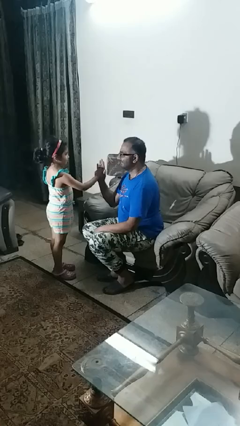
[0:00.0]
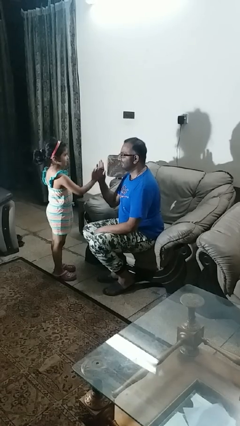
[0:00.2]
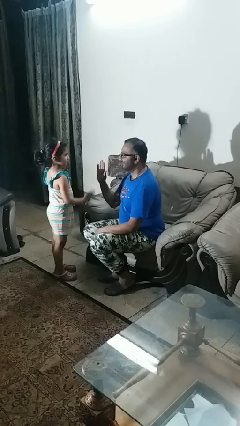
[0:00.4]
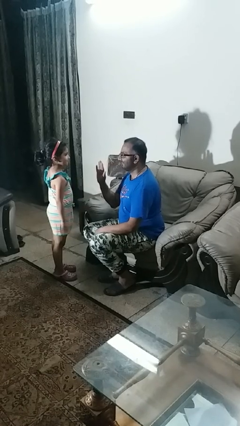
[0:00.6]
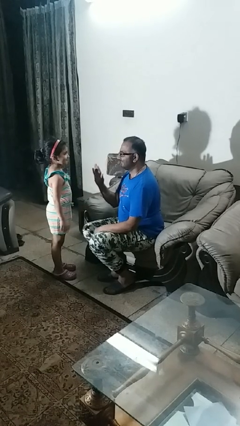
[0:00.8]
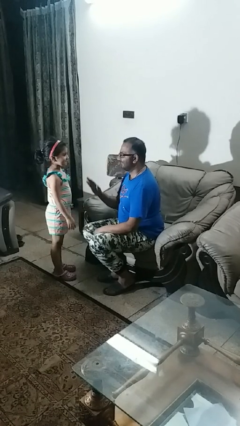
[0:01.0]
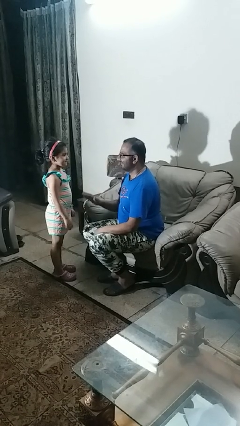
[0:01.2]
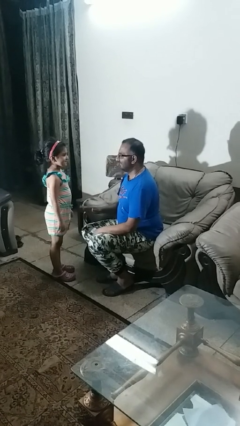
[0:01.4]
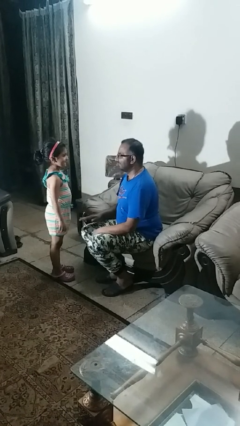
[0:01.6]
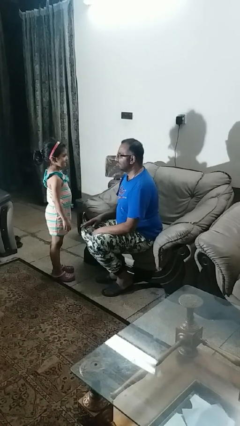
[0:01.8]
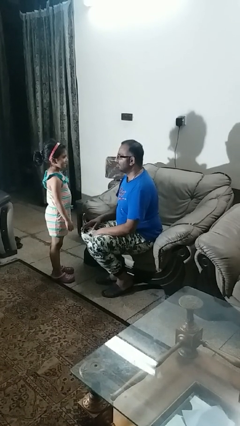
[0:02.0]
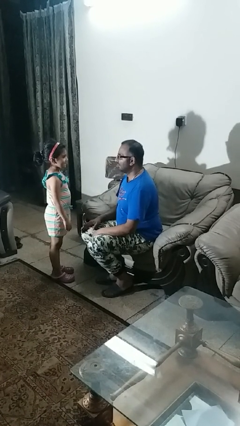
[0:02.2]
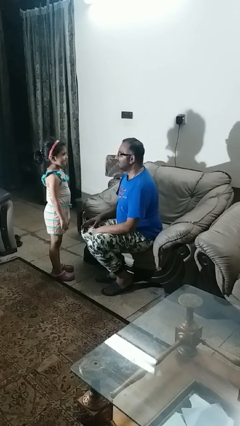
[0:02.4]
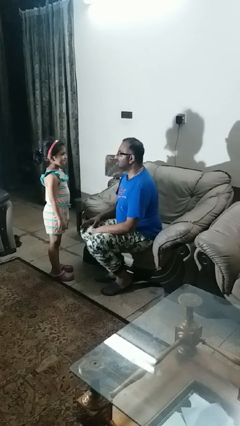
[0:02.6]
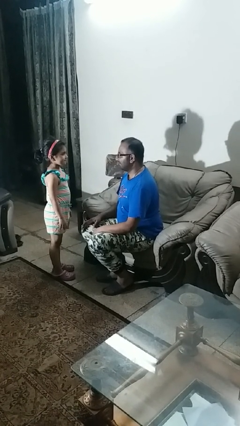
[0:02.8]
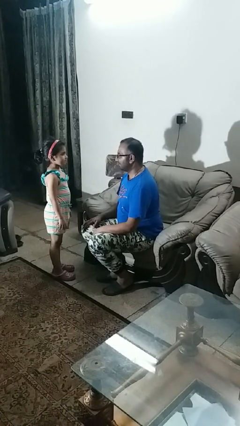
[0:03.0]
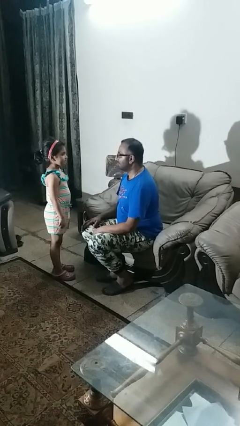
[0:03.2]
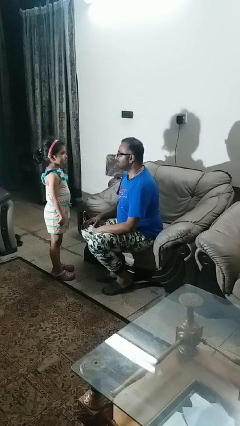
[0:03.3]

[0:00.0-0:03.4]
person highfives hand

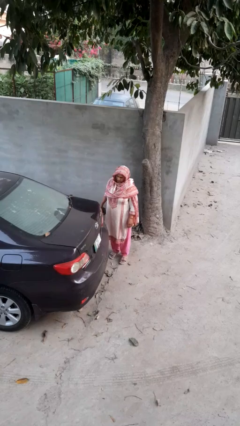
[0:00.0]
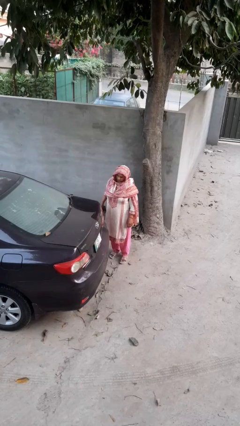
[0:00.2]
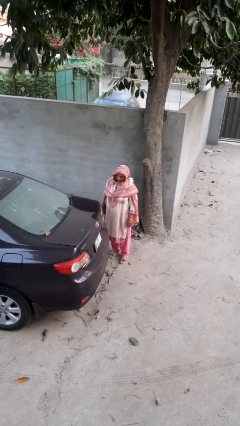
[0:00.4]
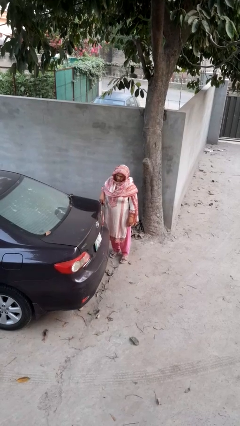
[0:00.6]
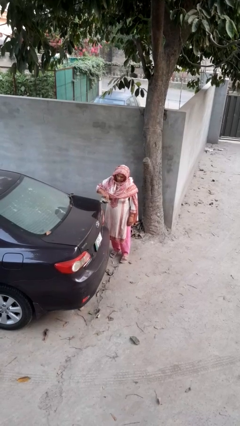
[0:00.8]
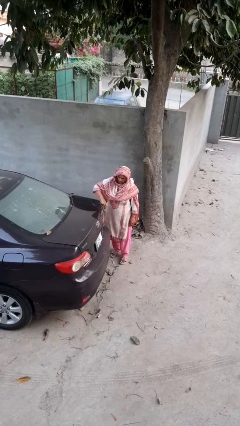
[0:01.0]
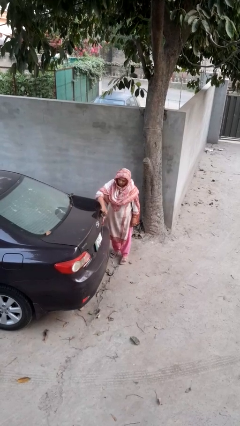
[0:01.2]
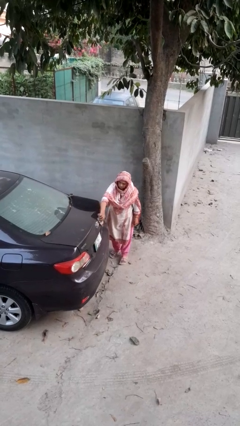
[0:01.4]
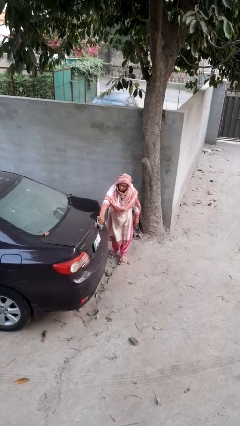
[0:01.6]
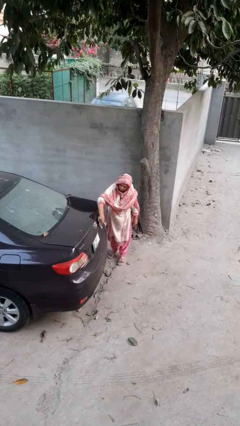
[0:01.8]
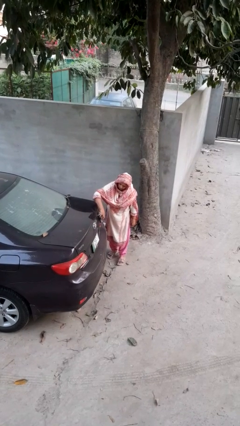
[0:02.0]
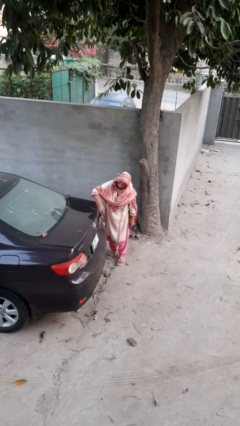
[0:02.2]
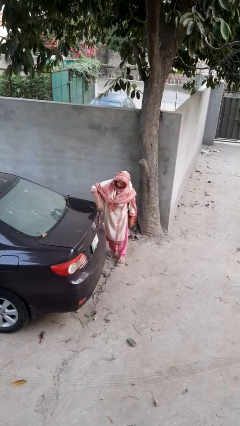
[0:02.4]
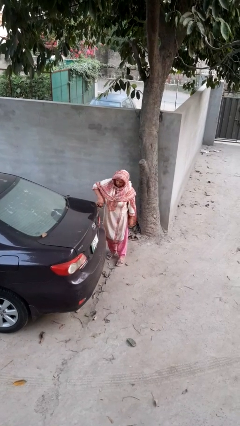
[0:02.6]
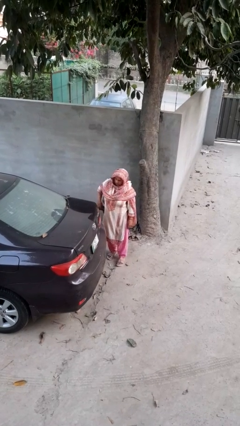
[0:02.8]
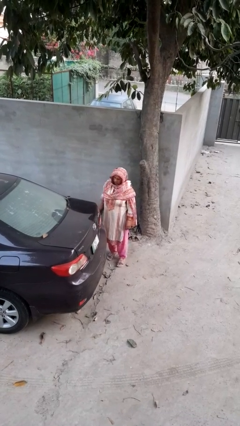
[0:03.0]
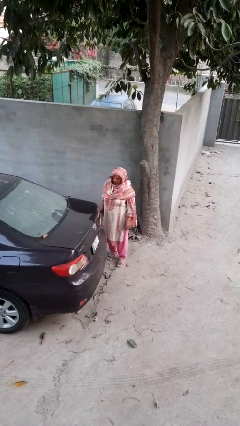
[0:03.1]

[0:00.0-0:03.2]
person polishes car with rag

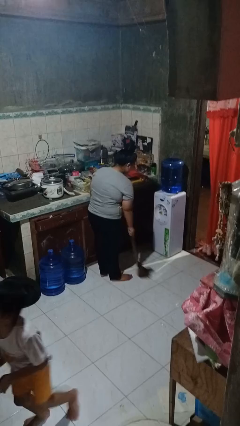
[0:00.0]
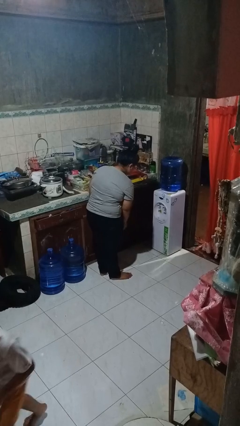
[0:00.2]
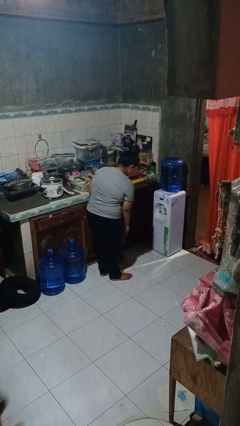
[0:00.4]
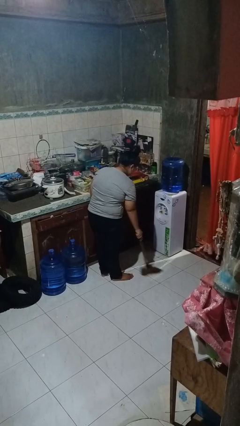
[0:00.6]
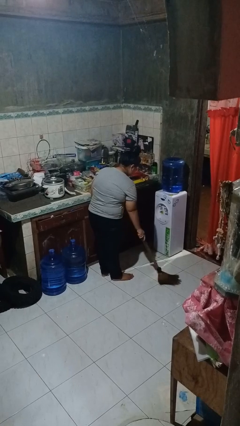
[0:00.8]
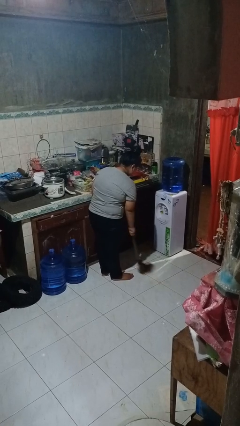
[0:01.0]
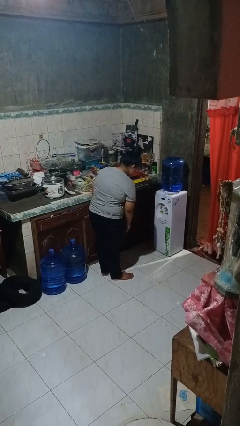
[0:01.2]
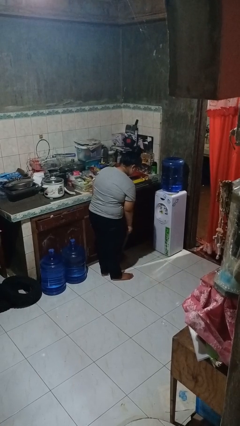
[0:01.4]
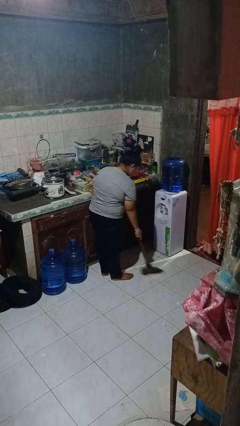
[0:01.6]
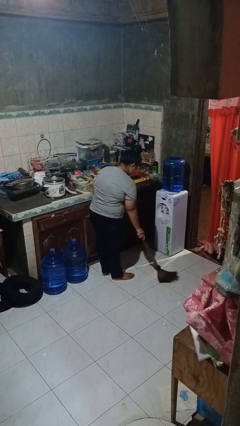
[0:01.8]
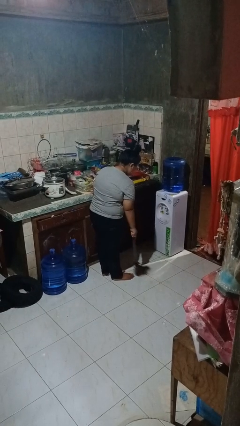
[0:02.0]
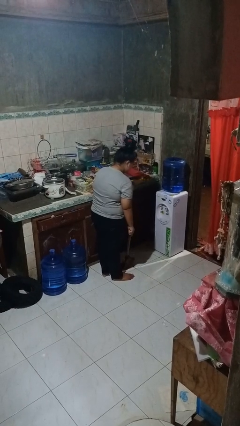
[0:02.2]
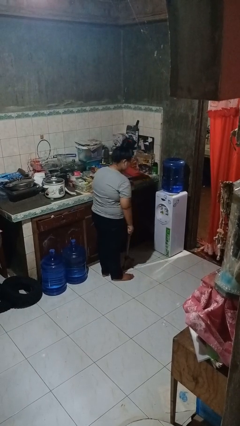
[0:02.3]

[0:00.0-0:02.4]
person sweeps floor

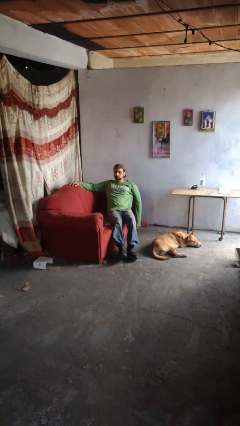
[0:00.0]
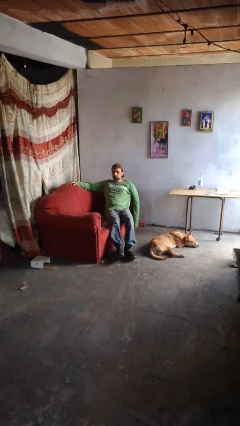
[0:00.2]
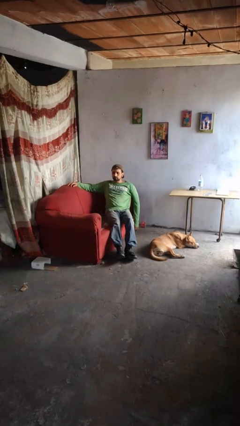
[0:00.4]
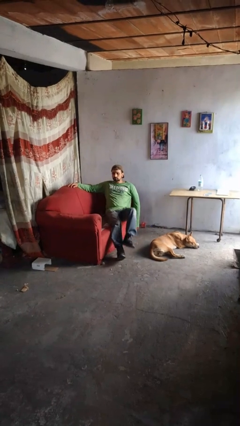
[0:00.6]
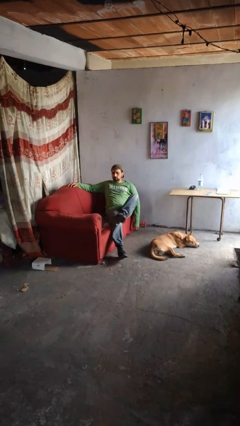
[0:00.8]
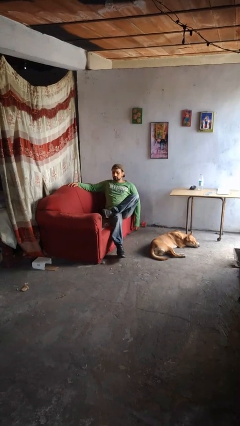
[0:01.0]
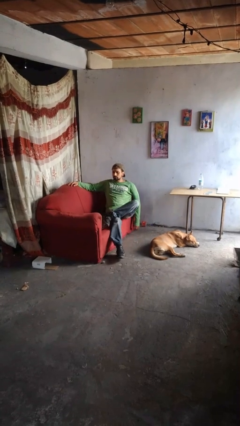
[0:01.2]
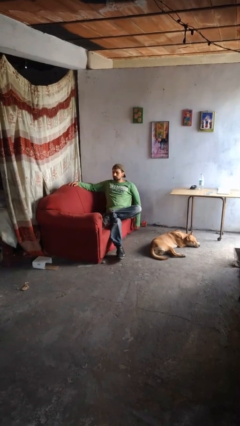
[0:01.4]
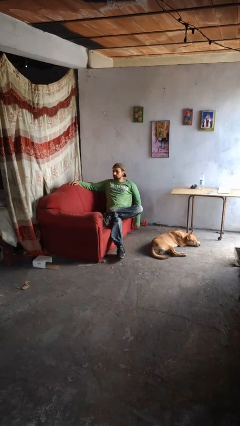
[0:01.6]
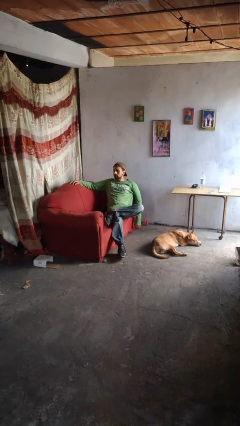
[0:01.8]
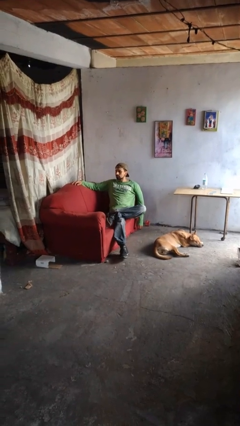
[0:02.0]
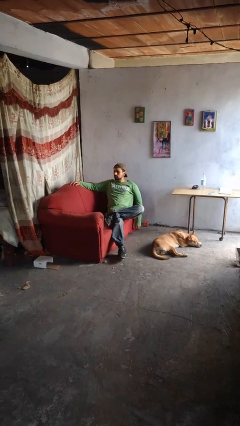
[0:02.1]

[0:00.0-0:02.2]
person crosses legs

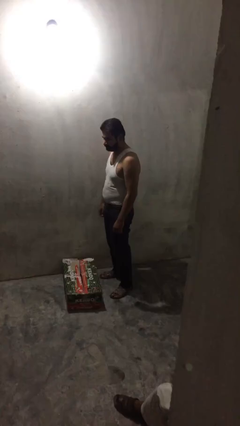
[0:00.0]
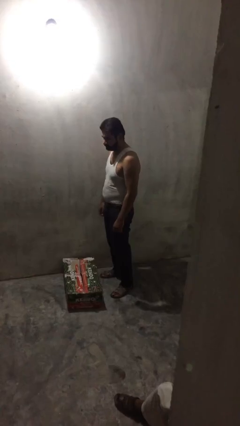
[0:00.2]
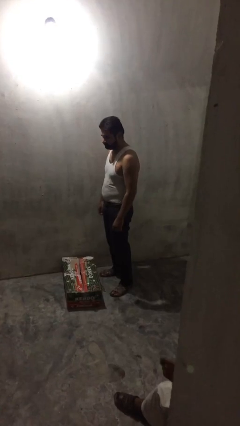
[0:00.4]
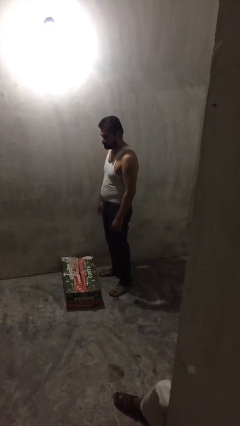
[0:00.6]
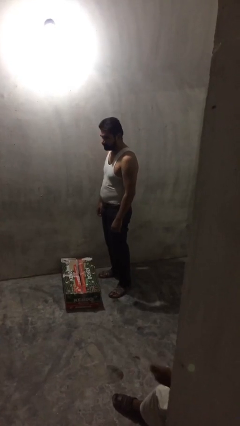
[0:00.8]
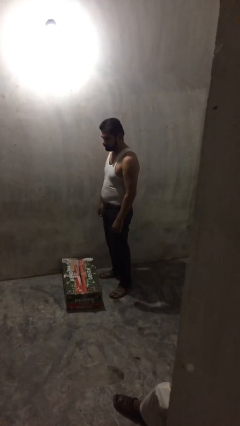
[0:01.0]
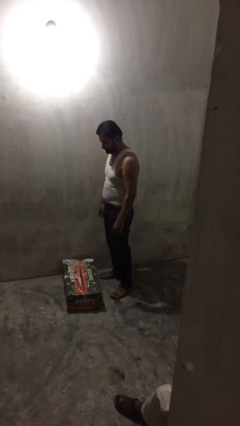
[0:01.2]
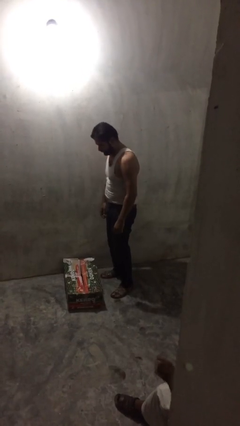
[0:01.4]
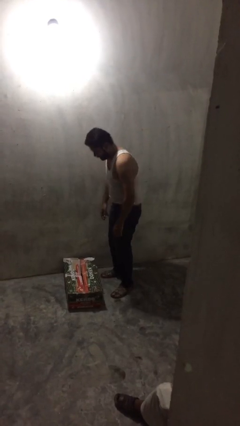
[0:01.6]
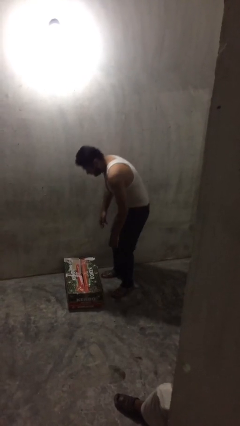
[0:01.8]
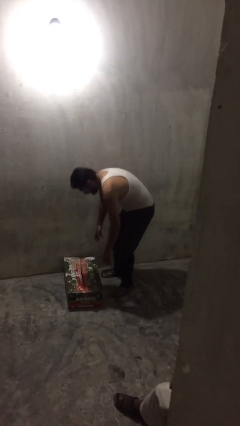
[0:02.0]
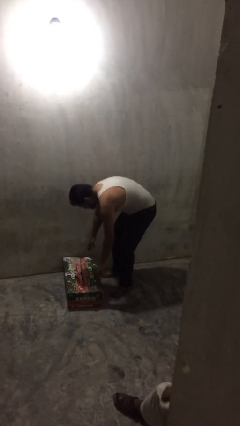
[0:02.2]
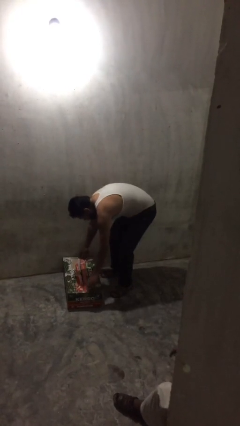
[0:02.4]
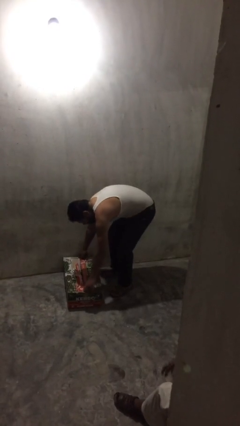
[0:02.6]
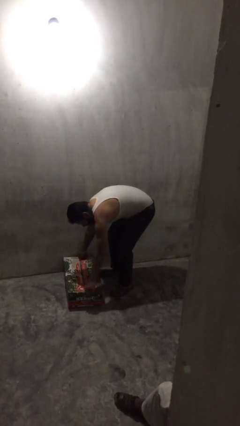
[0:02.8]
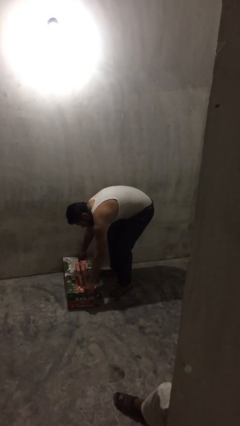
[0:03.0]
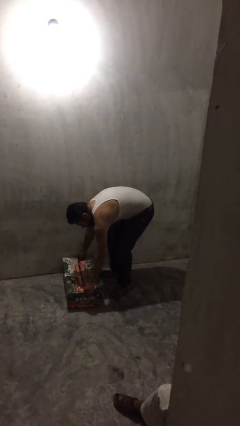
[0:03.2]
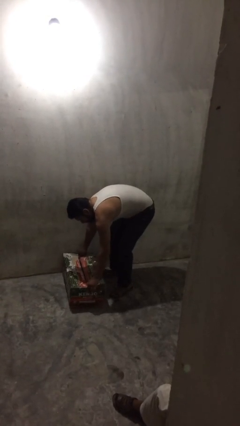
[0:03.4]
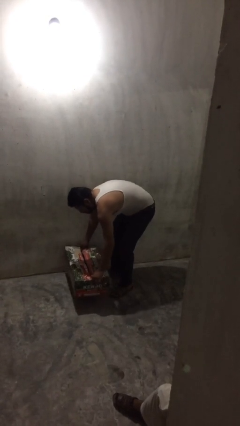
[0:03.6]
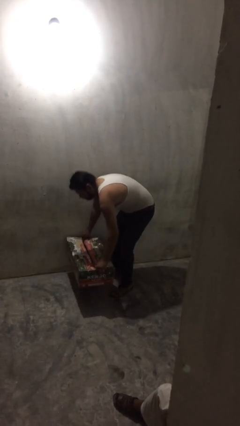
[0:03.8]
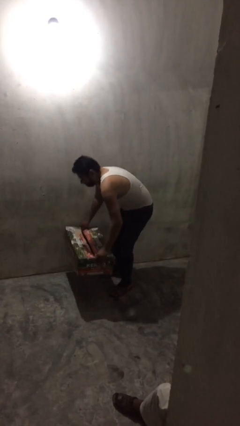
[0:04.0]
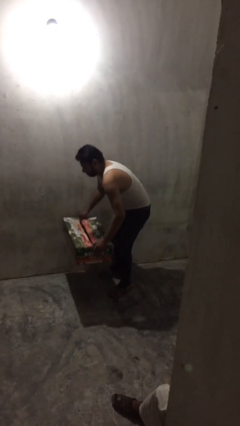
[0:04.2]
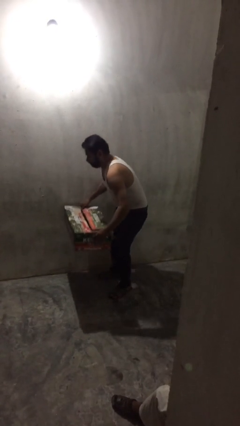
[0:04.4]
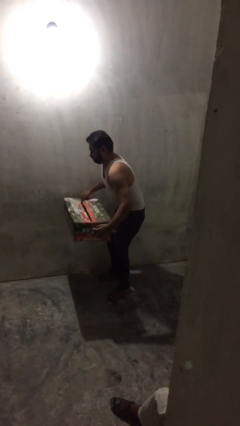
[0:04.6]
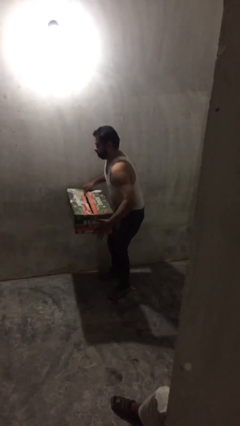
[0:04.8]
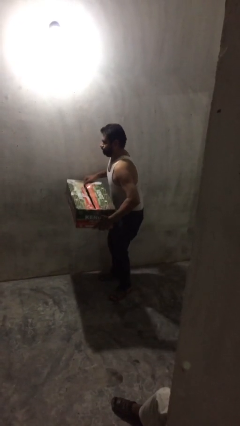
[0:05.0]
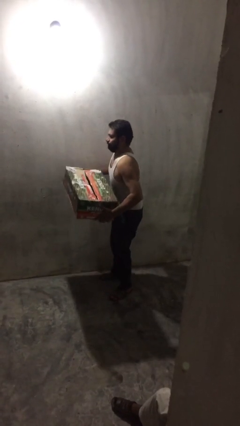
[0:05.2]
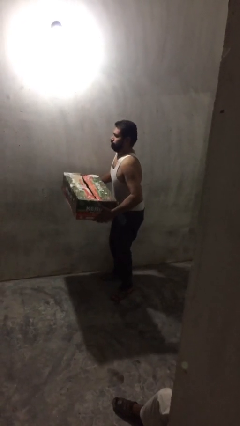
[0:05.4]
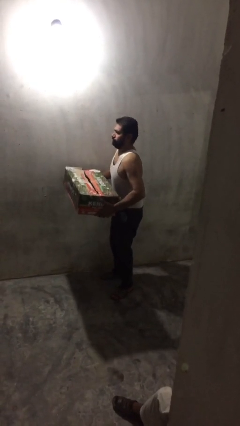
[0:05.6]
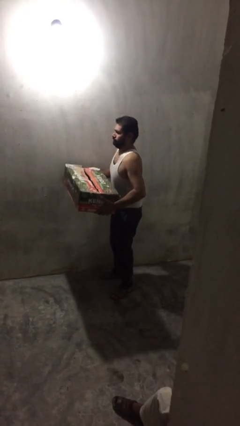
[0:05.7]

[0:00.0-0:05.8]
person picks up object from floor

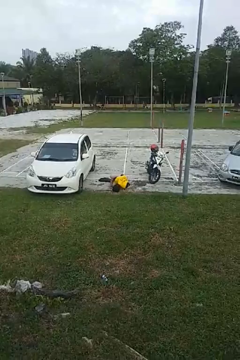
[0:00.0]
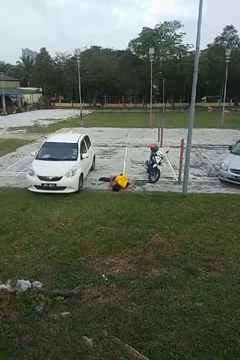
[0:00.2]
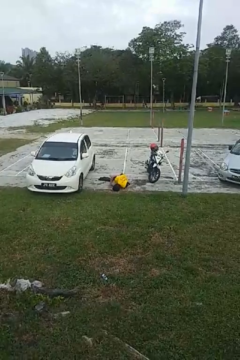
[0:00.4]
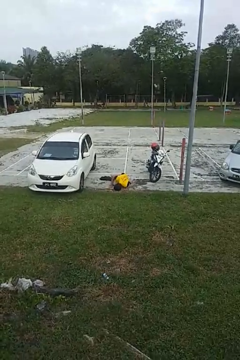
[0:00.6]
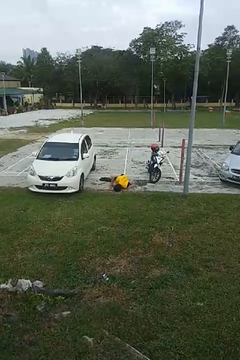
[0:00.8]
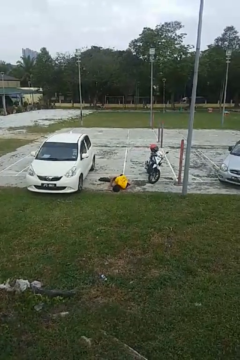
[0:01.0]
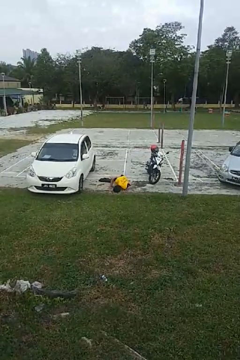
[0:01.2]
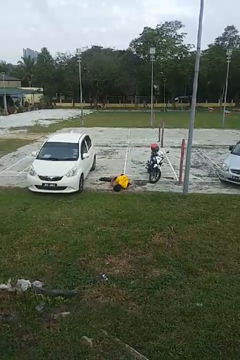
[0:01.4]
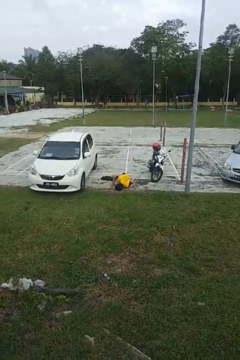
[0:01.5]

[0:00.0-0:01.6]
person lies down on floor
